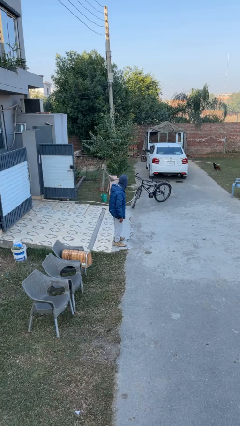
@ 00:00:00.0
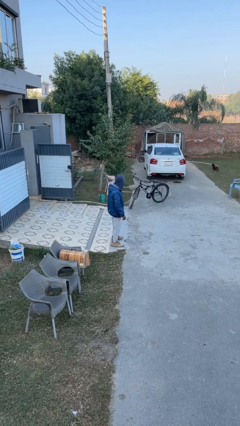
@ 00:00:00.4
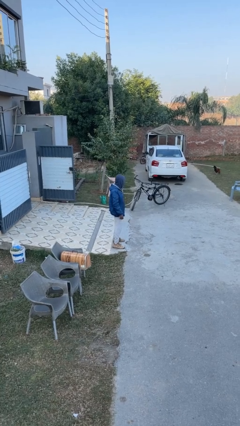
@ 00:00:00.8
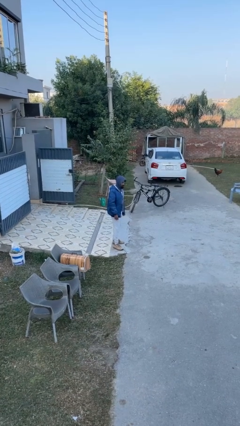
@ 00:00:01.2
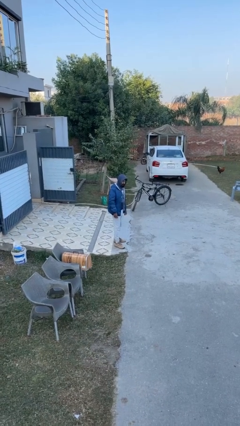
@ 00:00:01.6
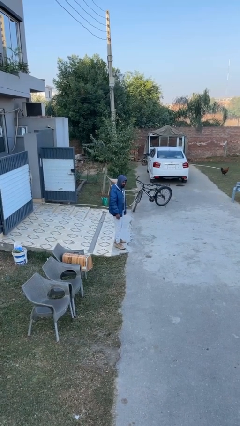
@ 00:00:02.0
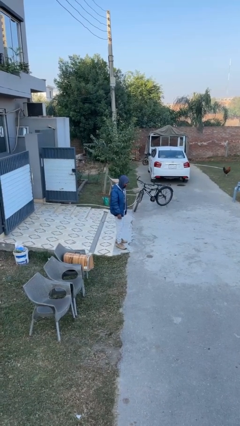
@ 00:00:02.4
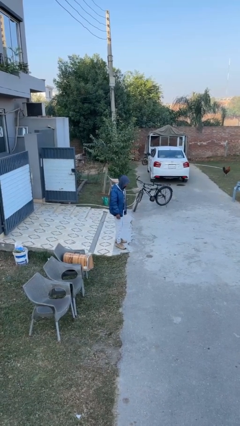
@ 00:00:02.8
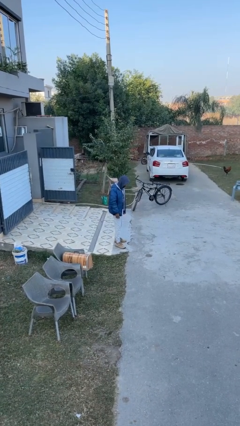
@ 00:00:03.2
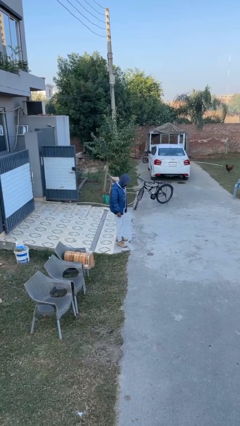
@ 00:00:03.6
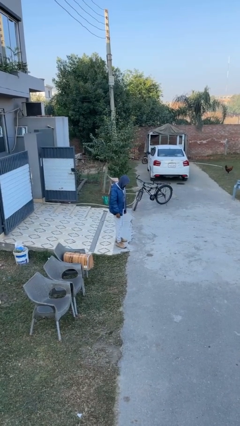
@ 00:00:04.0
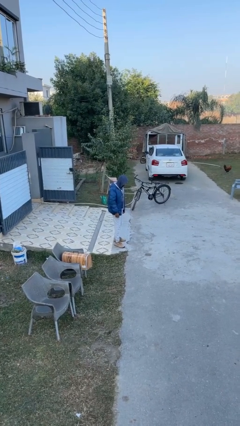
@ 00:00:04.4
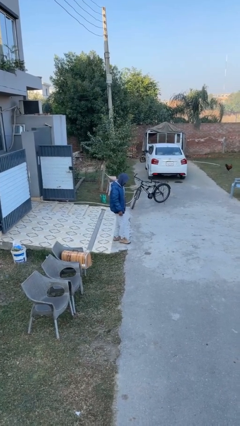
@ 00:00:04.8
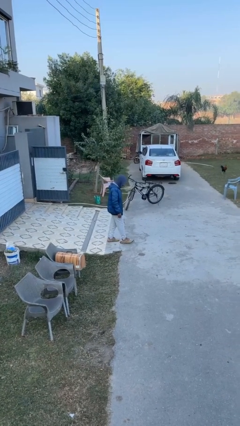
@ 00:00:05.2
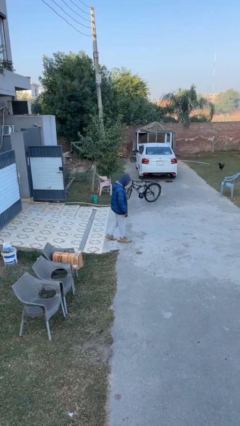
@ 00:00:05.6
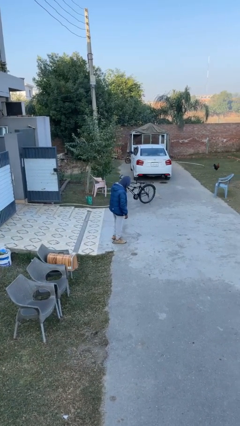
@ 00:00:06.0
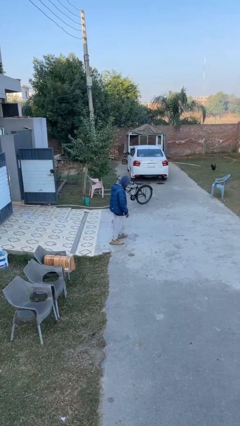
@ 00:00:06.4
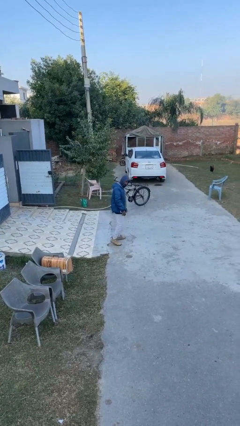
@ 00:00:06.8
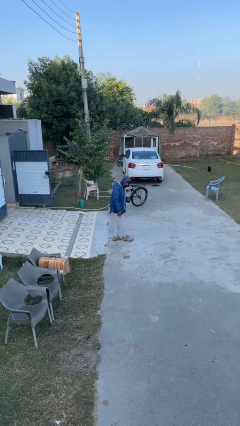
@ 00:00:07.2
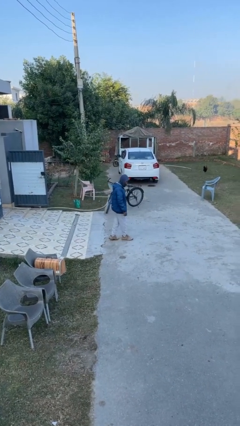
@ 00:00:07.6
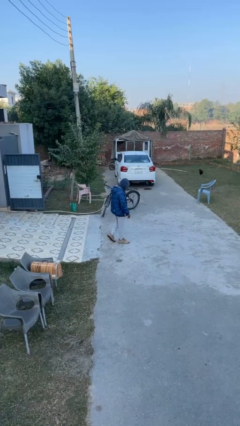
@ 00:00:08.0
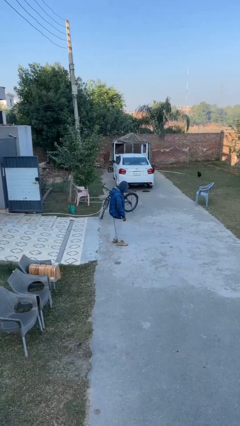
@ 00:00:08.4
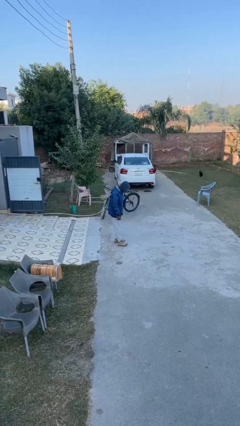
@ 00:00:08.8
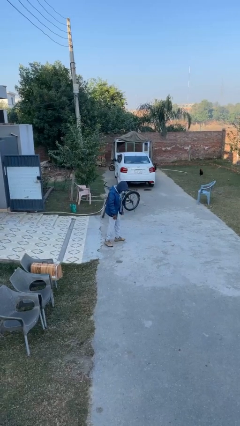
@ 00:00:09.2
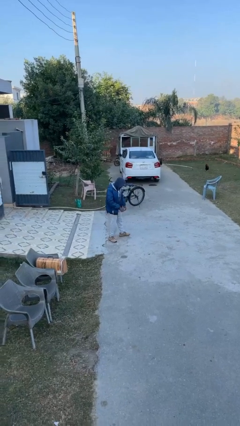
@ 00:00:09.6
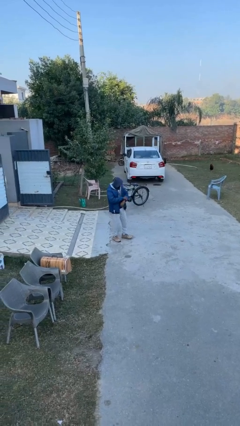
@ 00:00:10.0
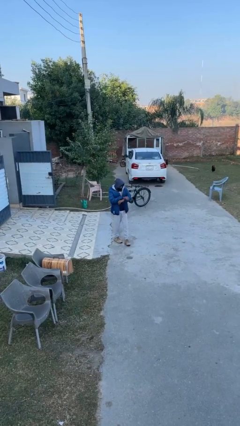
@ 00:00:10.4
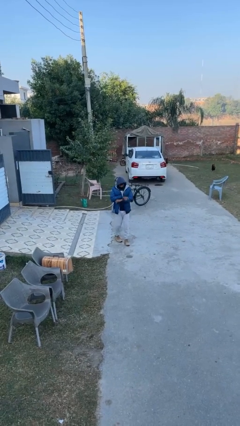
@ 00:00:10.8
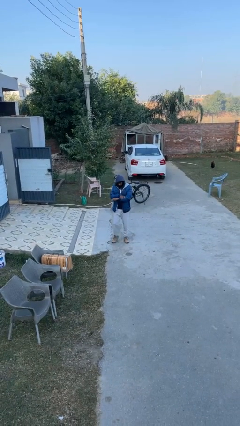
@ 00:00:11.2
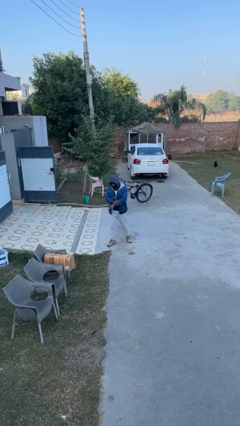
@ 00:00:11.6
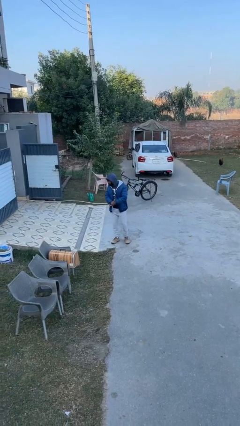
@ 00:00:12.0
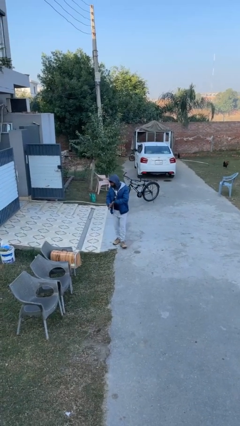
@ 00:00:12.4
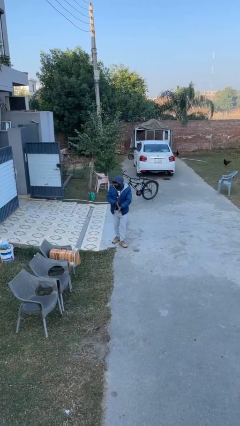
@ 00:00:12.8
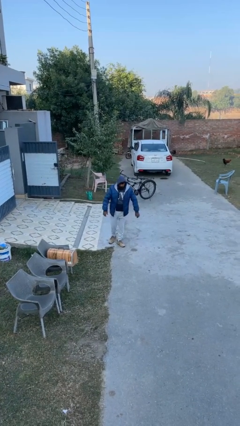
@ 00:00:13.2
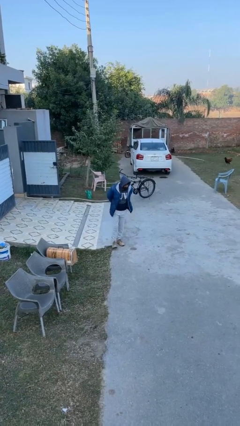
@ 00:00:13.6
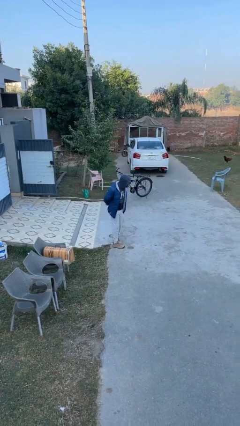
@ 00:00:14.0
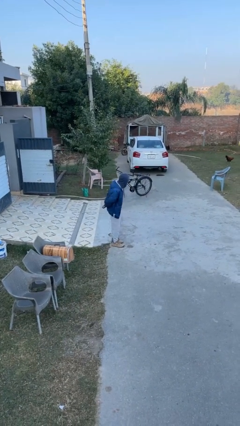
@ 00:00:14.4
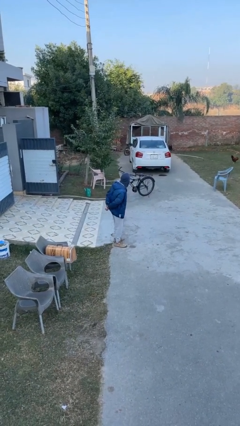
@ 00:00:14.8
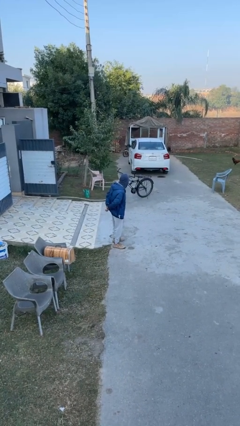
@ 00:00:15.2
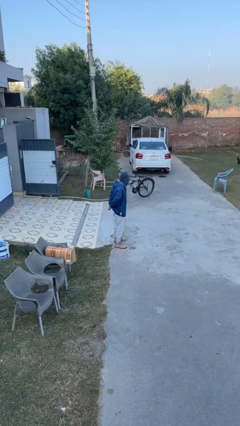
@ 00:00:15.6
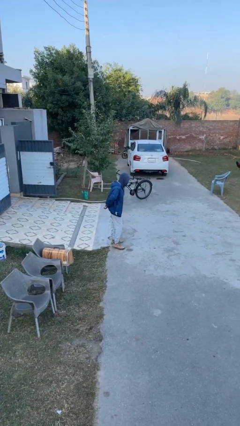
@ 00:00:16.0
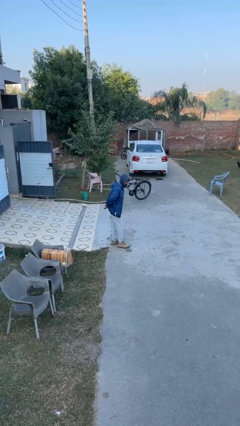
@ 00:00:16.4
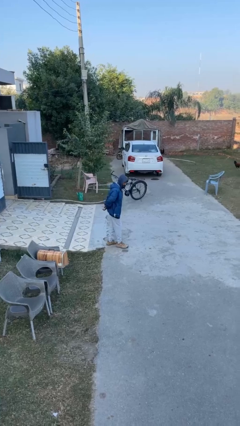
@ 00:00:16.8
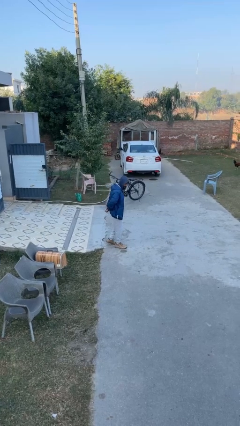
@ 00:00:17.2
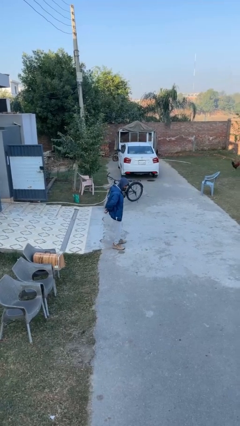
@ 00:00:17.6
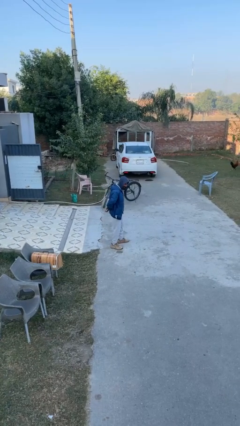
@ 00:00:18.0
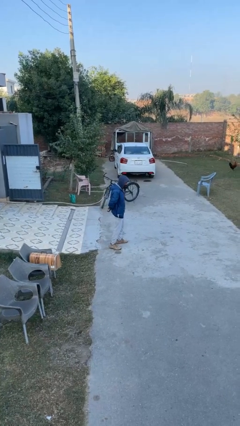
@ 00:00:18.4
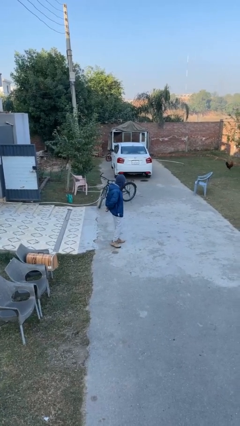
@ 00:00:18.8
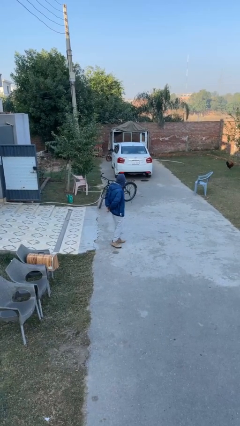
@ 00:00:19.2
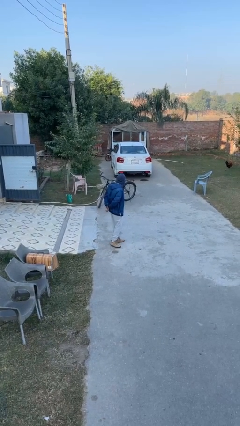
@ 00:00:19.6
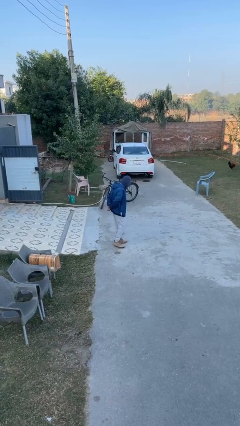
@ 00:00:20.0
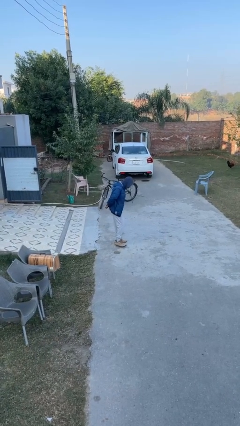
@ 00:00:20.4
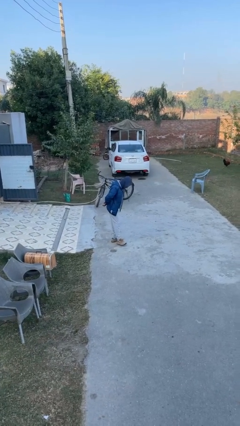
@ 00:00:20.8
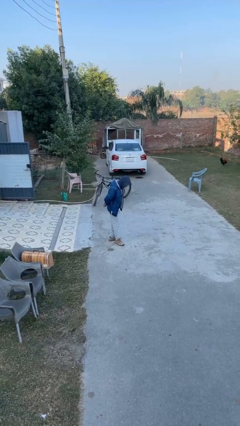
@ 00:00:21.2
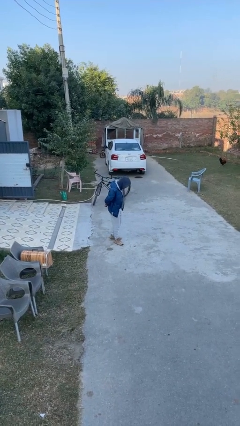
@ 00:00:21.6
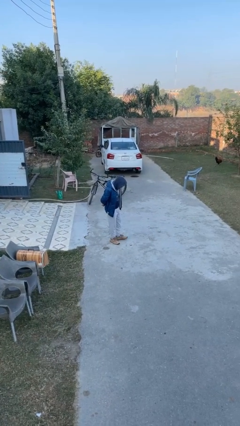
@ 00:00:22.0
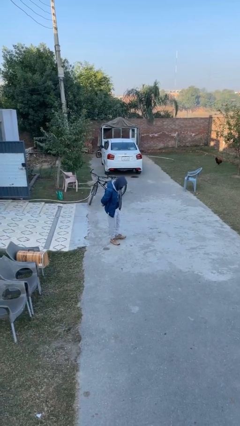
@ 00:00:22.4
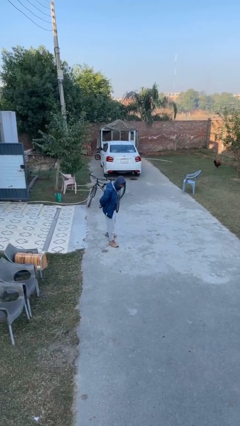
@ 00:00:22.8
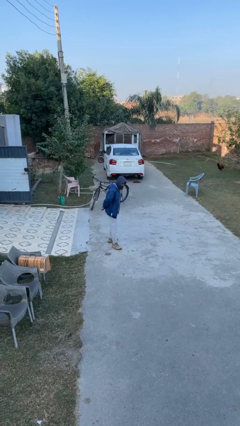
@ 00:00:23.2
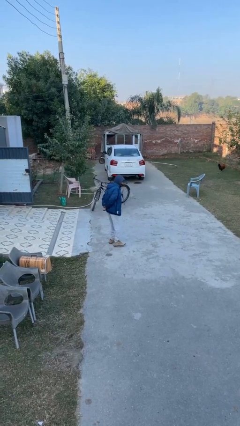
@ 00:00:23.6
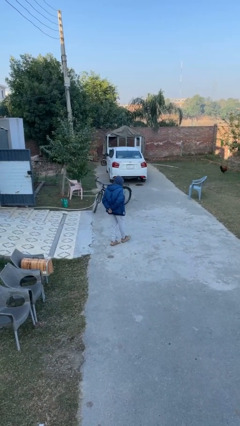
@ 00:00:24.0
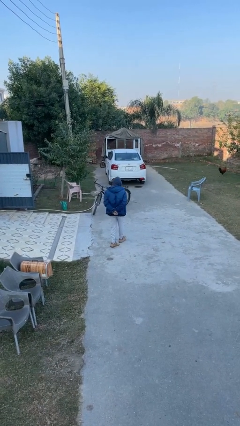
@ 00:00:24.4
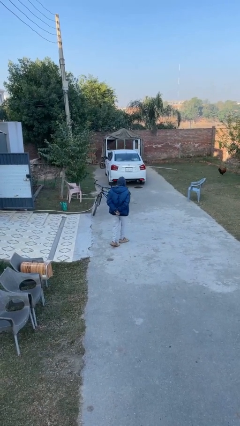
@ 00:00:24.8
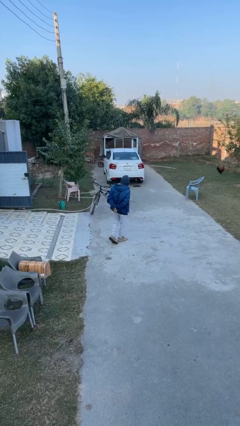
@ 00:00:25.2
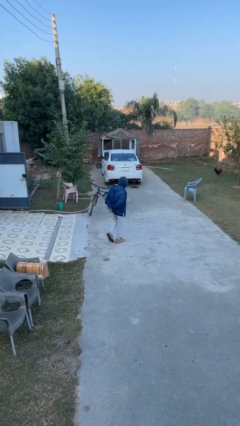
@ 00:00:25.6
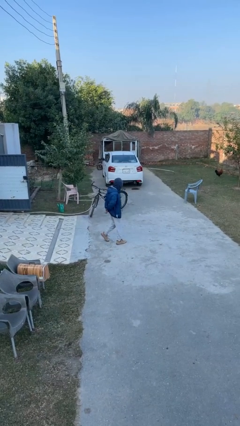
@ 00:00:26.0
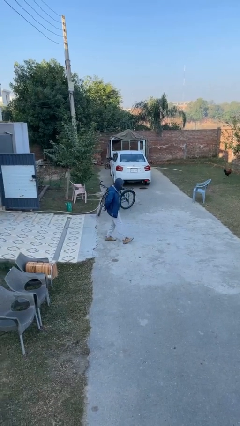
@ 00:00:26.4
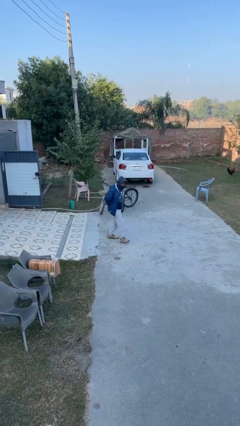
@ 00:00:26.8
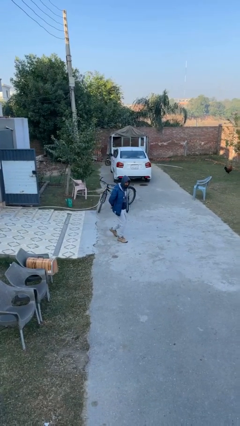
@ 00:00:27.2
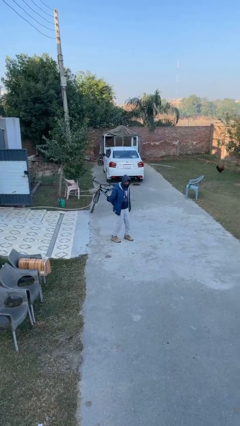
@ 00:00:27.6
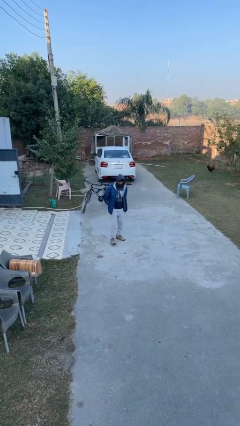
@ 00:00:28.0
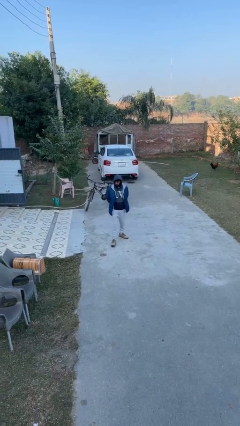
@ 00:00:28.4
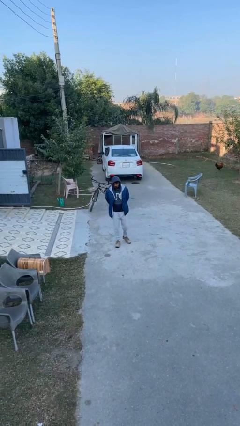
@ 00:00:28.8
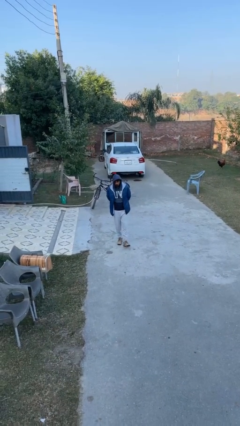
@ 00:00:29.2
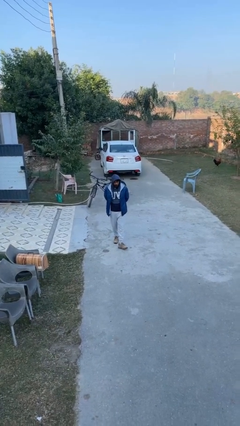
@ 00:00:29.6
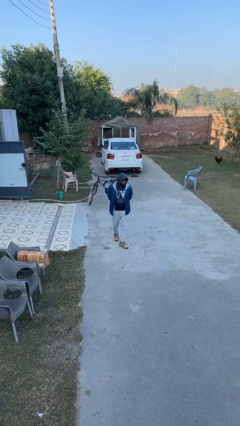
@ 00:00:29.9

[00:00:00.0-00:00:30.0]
person walks

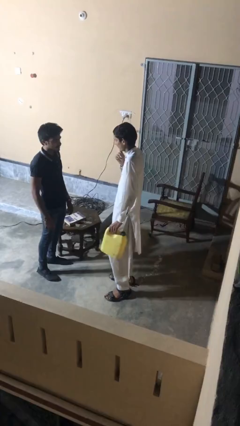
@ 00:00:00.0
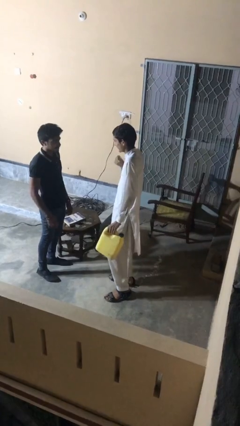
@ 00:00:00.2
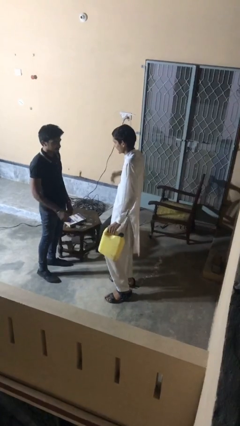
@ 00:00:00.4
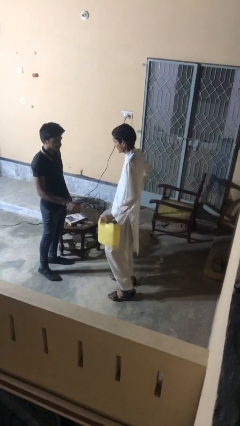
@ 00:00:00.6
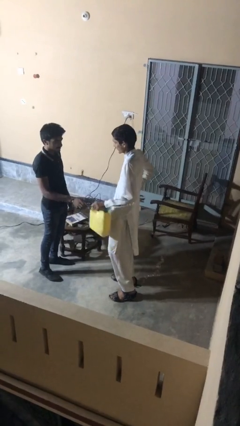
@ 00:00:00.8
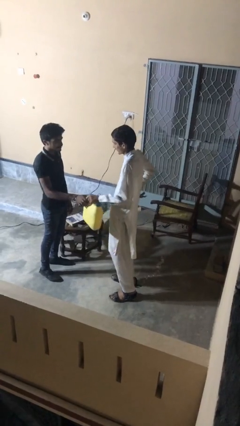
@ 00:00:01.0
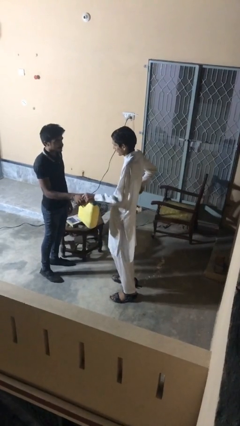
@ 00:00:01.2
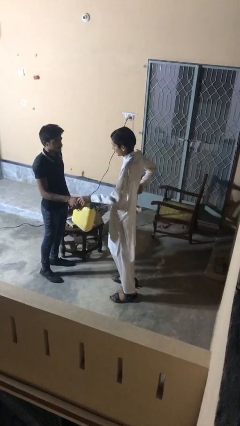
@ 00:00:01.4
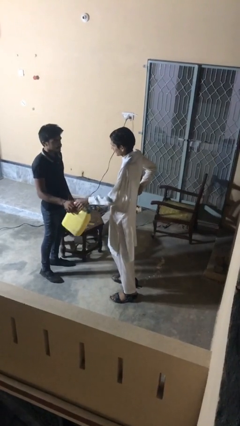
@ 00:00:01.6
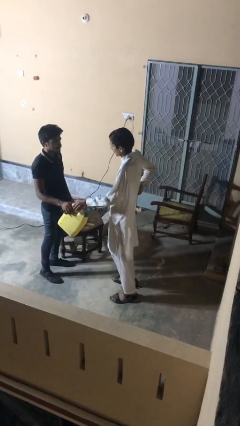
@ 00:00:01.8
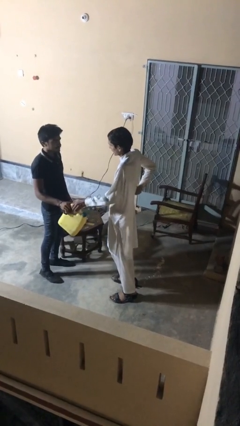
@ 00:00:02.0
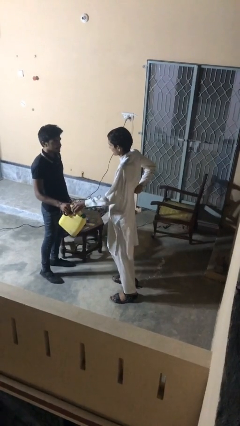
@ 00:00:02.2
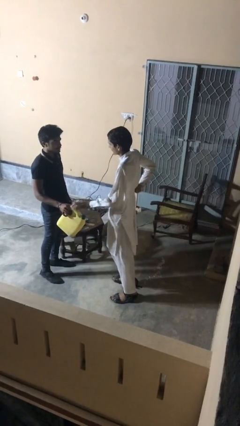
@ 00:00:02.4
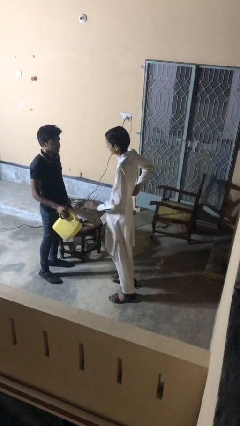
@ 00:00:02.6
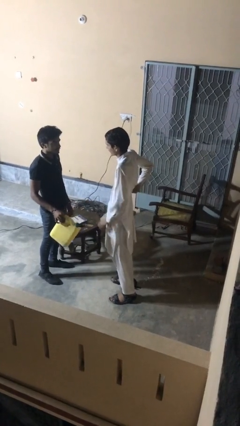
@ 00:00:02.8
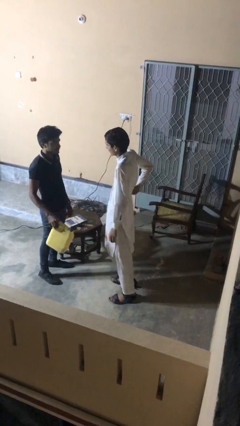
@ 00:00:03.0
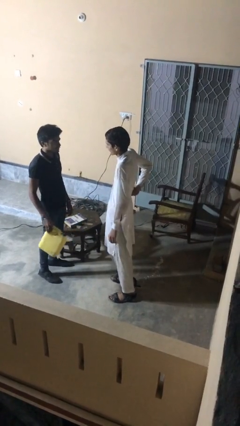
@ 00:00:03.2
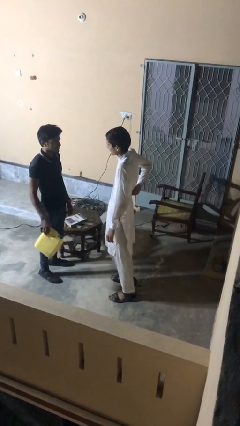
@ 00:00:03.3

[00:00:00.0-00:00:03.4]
person transfers object to person
